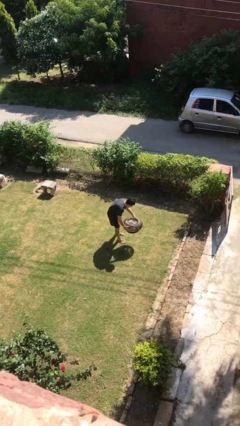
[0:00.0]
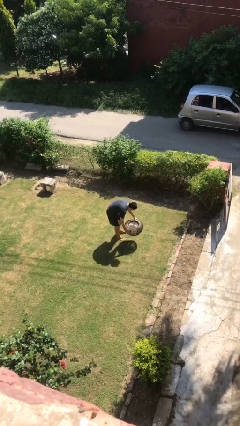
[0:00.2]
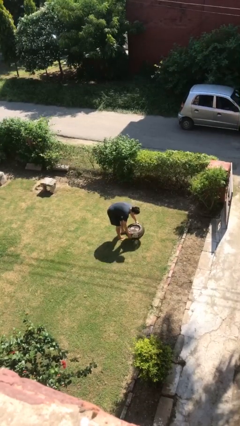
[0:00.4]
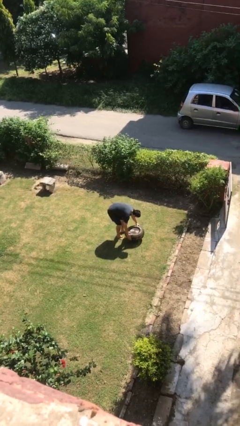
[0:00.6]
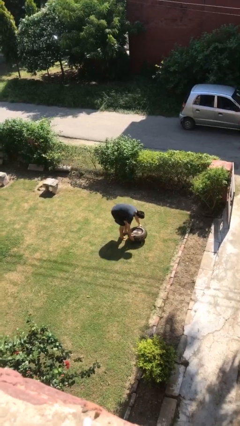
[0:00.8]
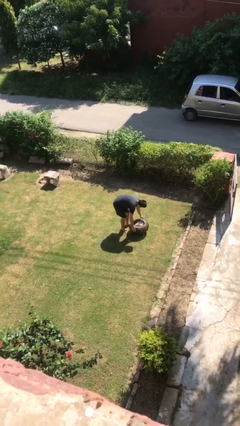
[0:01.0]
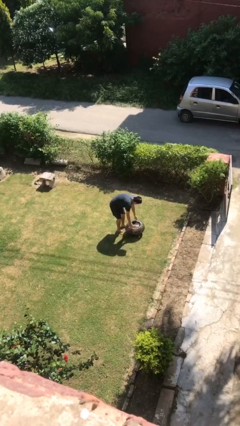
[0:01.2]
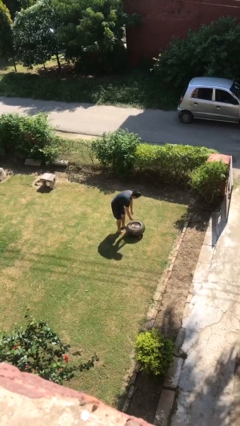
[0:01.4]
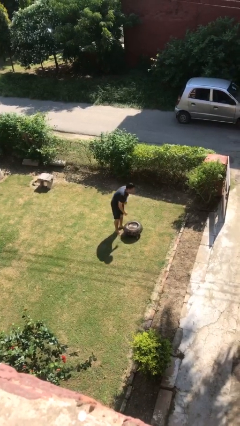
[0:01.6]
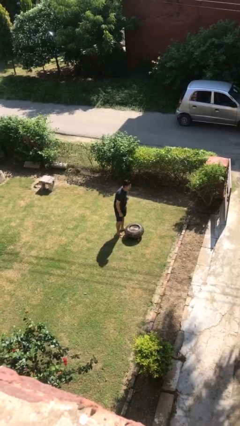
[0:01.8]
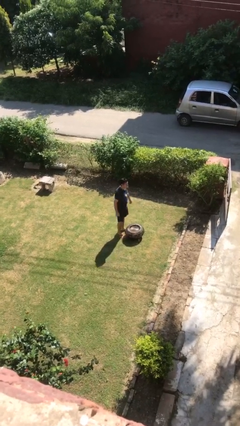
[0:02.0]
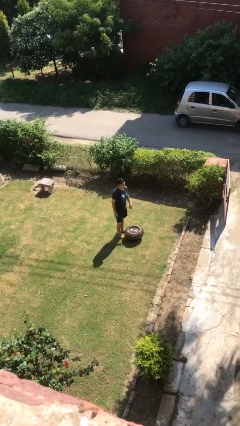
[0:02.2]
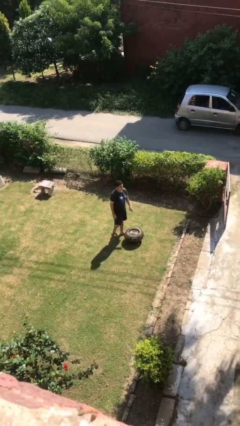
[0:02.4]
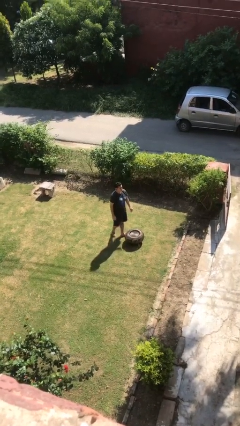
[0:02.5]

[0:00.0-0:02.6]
person puts down object on floor

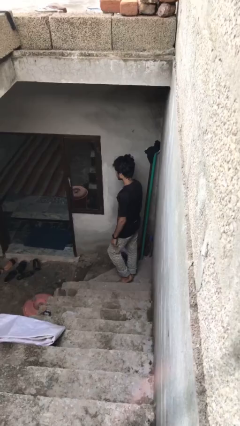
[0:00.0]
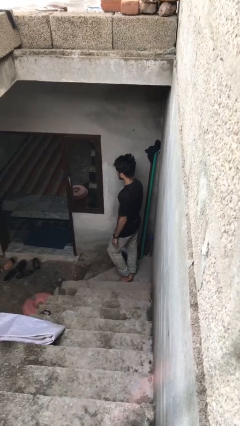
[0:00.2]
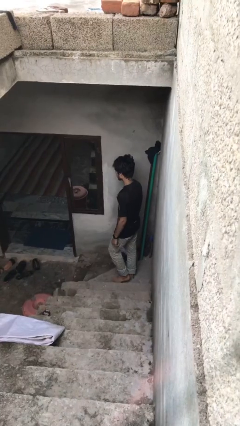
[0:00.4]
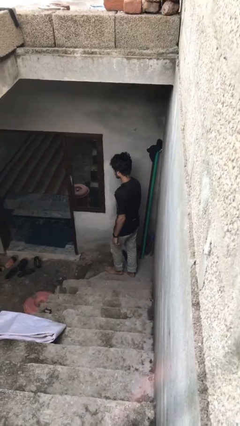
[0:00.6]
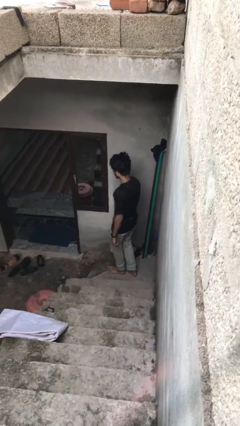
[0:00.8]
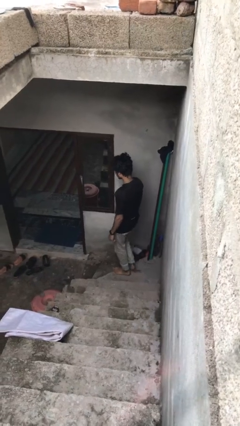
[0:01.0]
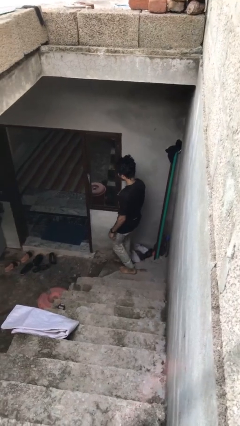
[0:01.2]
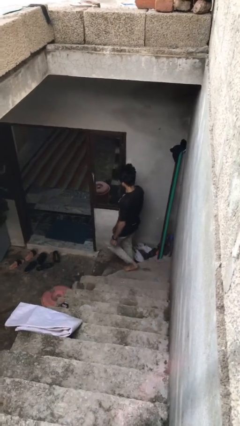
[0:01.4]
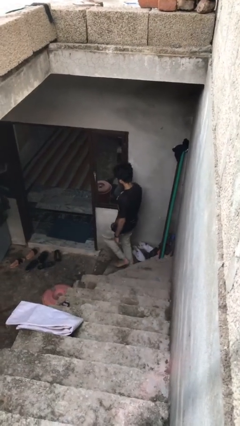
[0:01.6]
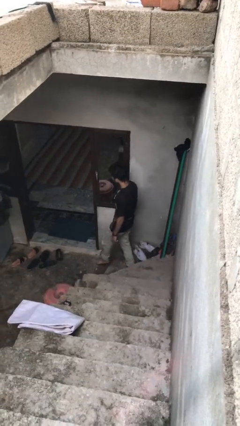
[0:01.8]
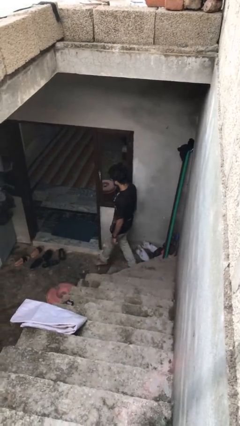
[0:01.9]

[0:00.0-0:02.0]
person climbs down stairs

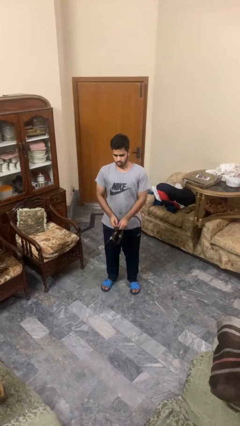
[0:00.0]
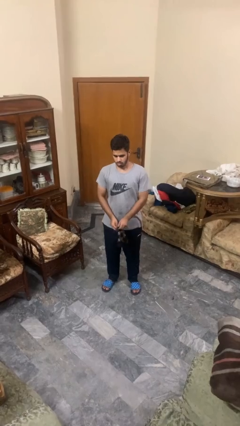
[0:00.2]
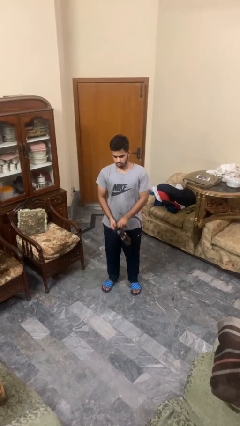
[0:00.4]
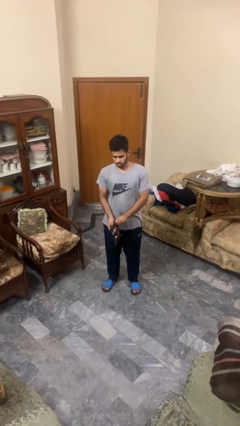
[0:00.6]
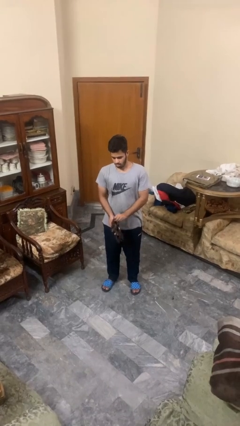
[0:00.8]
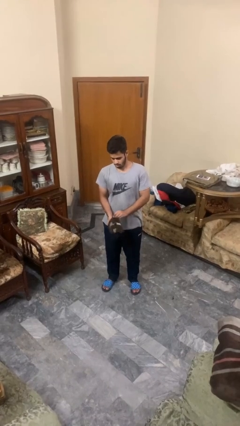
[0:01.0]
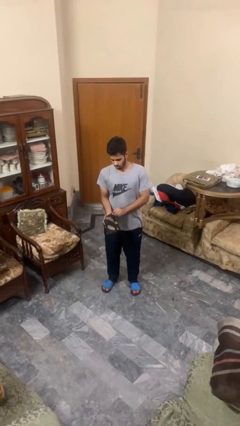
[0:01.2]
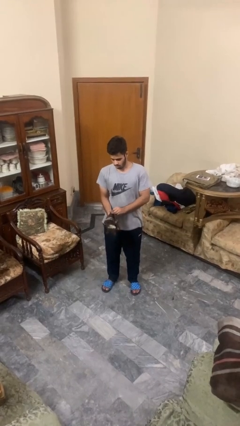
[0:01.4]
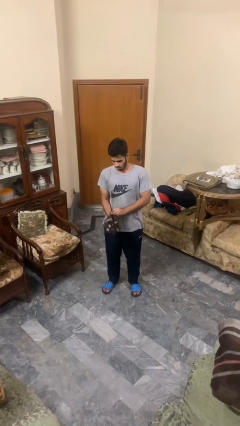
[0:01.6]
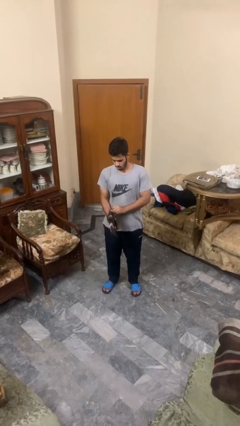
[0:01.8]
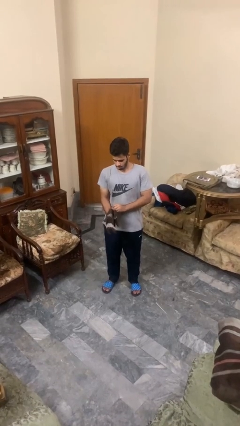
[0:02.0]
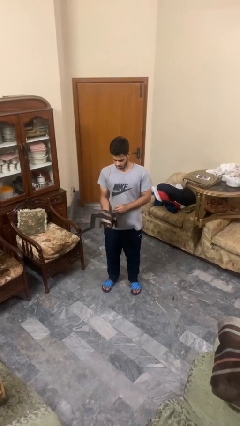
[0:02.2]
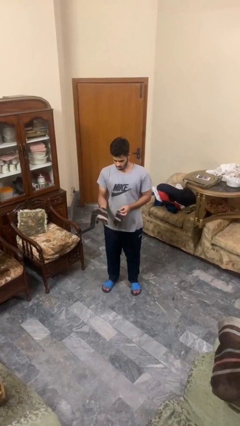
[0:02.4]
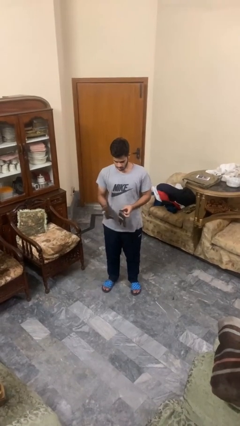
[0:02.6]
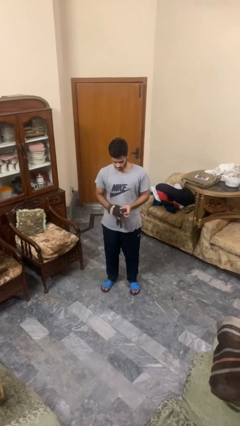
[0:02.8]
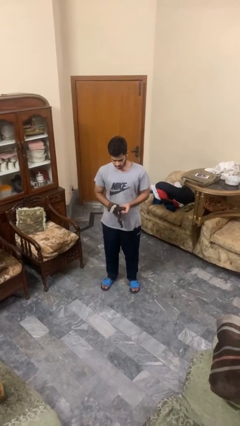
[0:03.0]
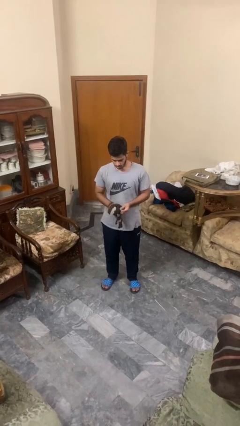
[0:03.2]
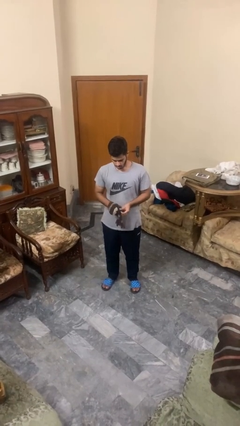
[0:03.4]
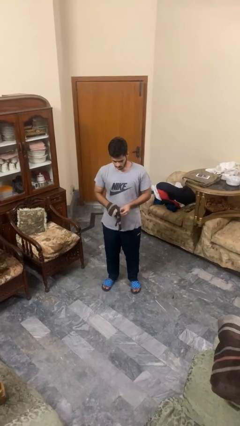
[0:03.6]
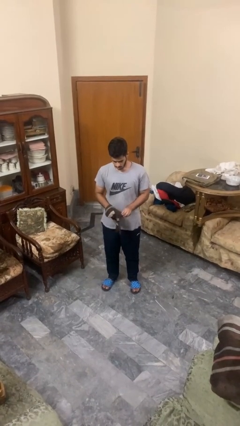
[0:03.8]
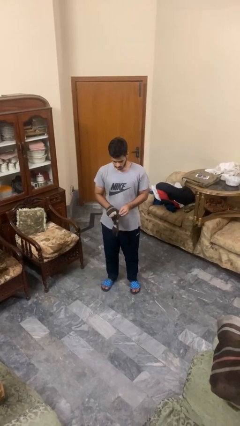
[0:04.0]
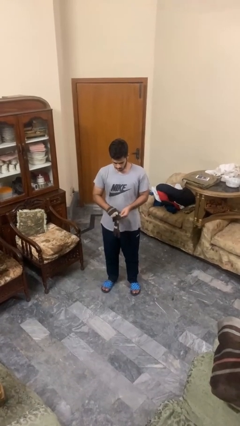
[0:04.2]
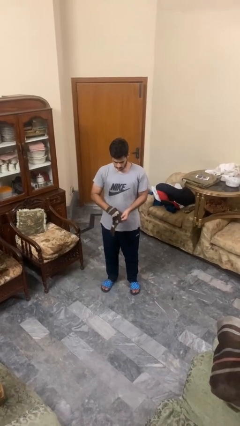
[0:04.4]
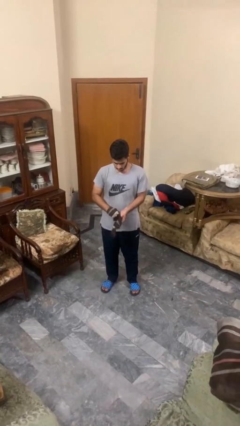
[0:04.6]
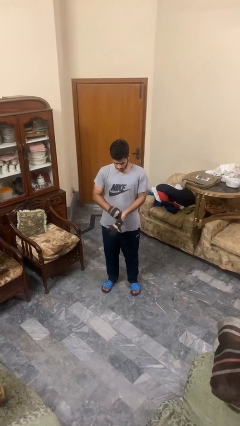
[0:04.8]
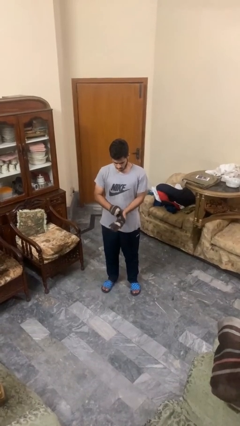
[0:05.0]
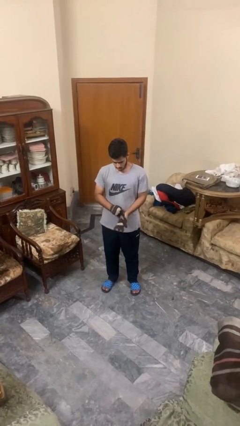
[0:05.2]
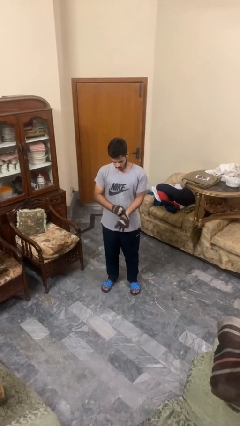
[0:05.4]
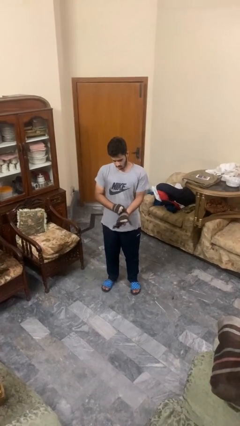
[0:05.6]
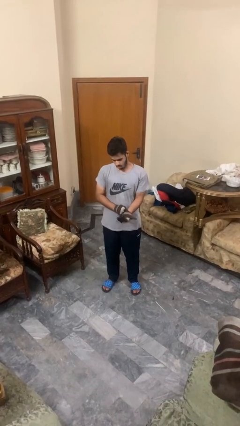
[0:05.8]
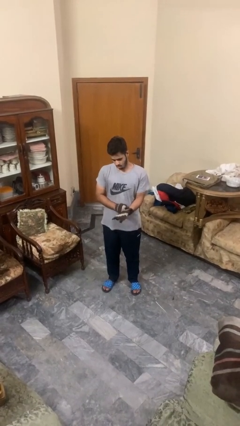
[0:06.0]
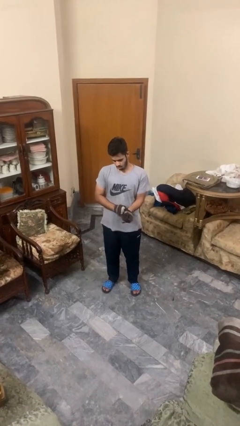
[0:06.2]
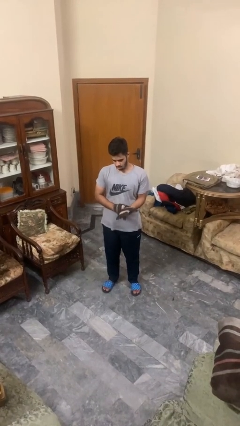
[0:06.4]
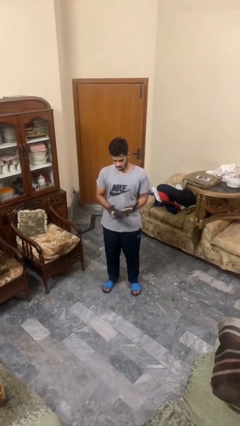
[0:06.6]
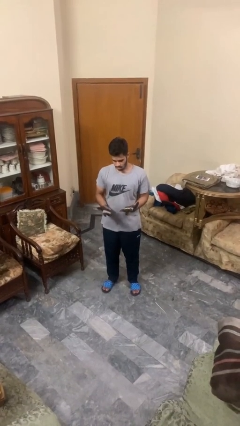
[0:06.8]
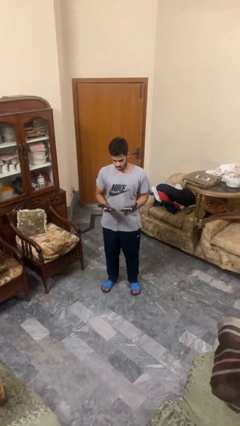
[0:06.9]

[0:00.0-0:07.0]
person puts on gloves

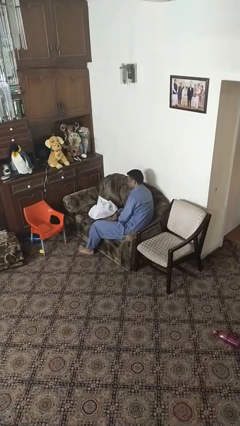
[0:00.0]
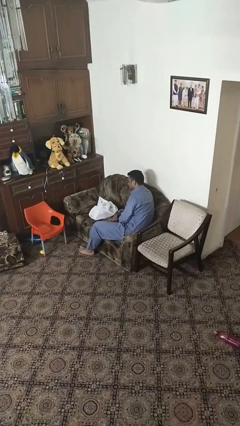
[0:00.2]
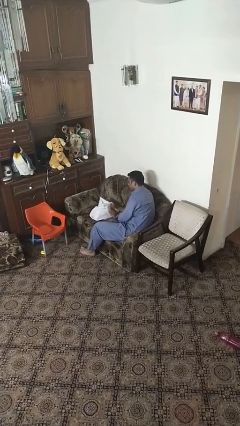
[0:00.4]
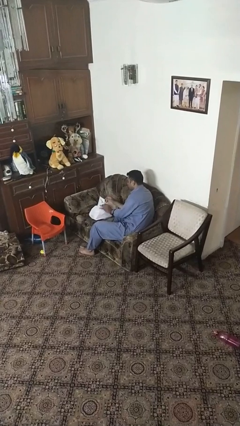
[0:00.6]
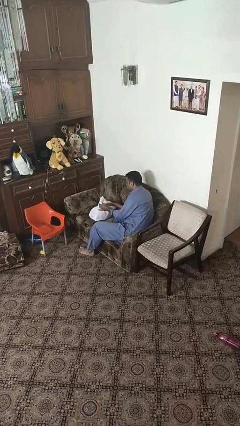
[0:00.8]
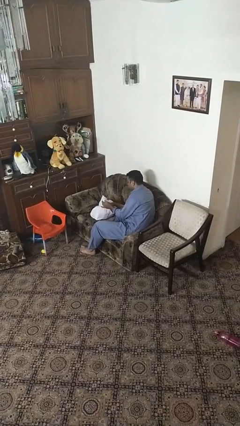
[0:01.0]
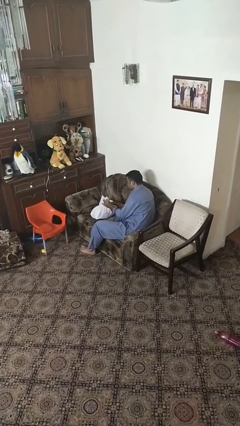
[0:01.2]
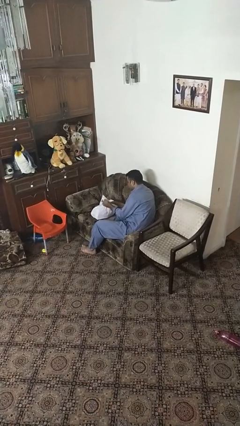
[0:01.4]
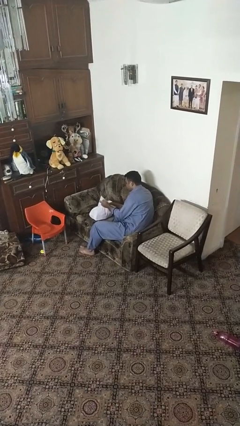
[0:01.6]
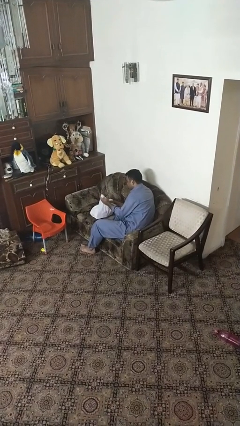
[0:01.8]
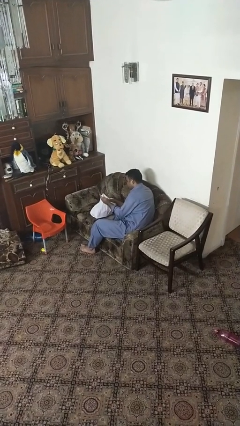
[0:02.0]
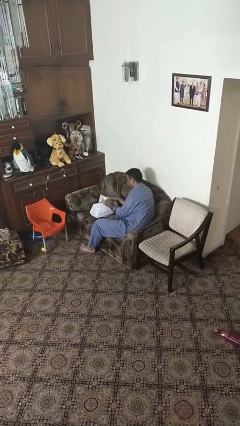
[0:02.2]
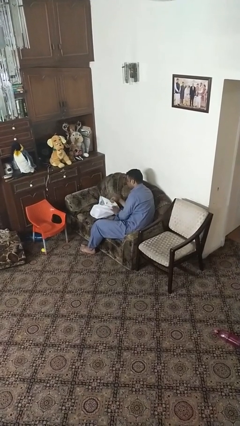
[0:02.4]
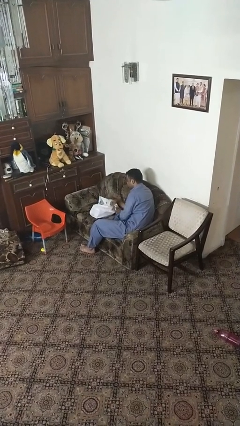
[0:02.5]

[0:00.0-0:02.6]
person searches in bag

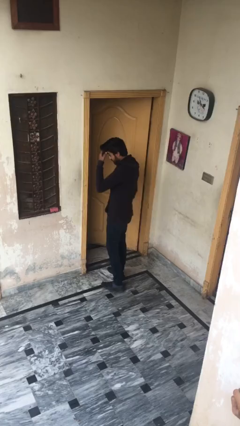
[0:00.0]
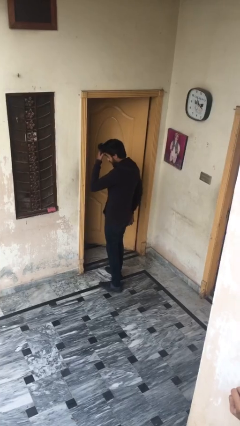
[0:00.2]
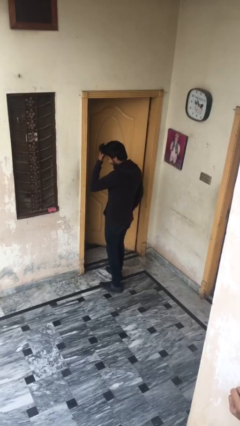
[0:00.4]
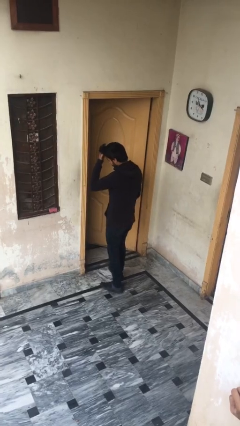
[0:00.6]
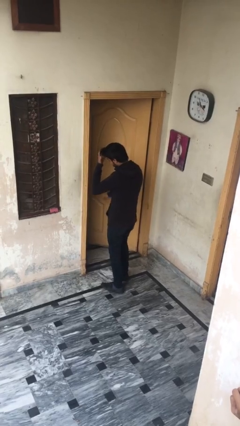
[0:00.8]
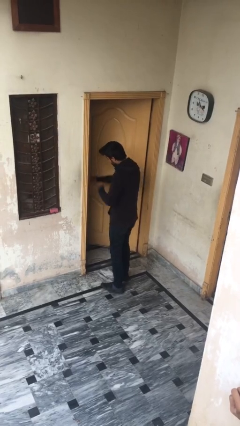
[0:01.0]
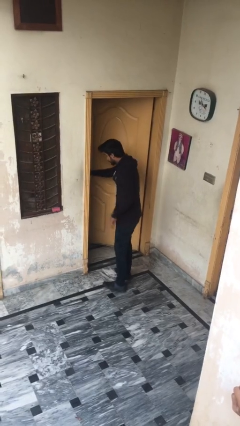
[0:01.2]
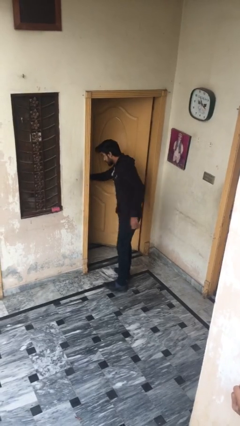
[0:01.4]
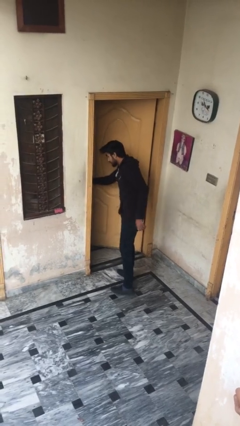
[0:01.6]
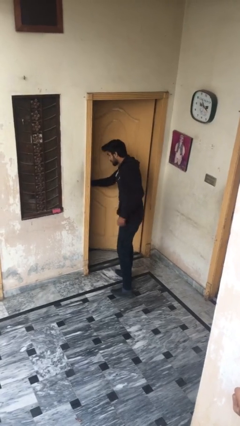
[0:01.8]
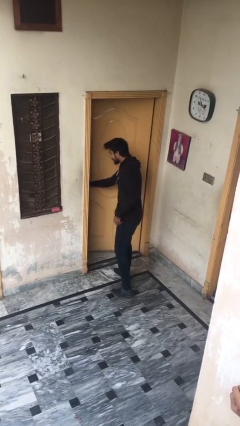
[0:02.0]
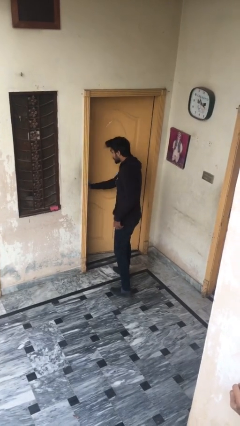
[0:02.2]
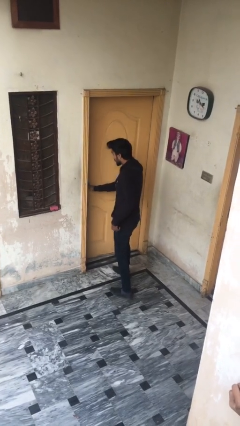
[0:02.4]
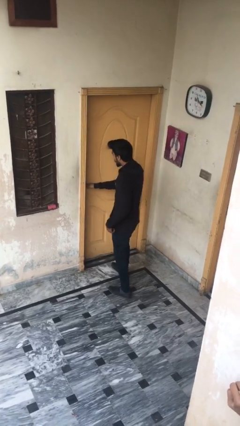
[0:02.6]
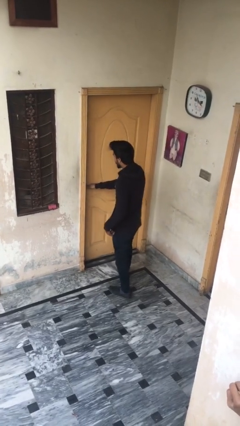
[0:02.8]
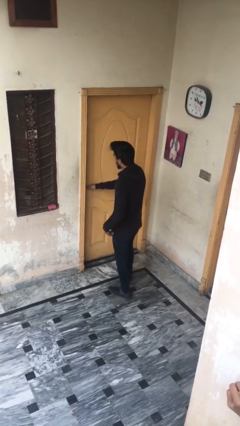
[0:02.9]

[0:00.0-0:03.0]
person closes facility door
